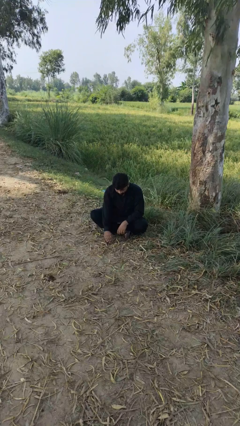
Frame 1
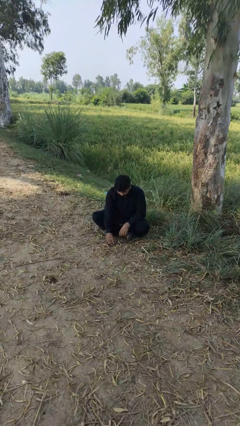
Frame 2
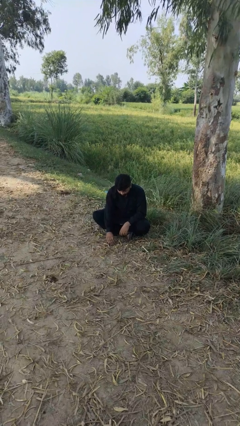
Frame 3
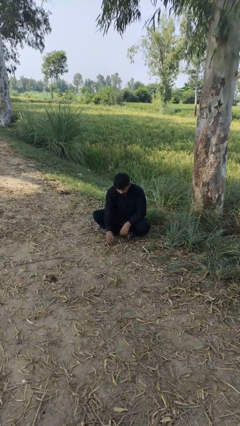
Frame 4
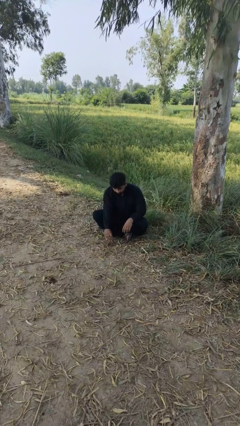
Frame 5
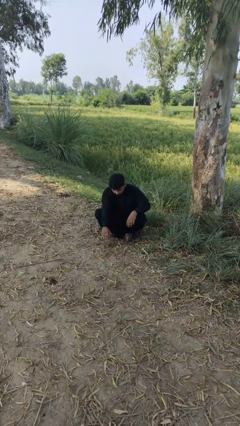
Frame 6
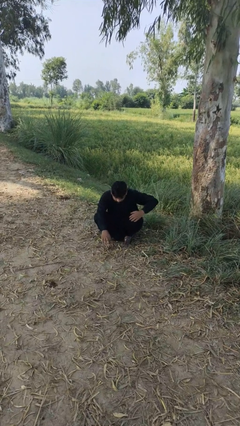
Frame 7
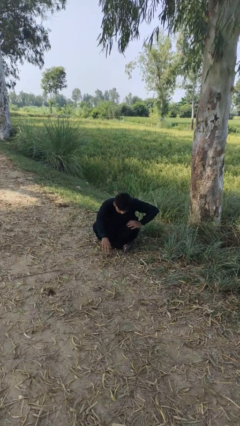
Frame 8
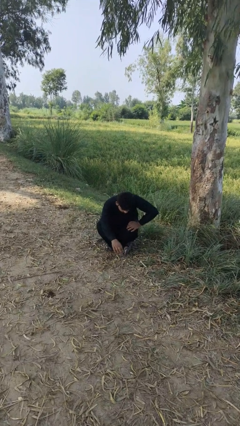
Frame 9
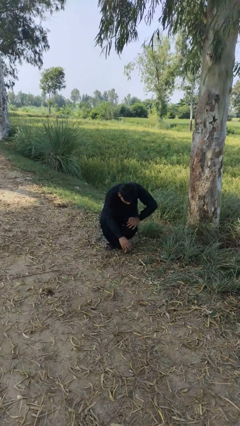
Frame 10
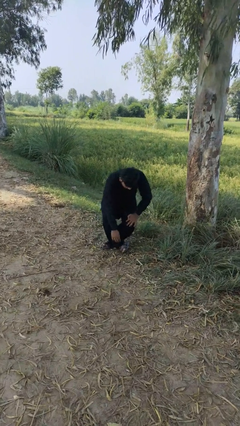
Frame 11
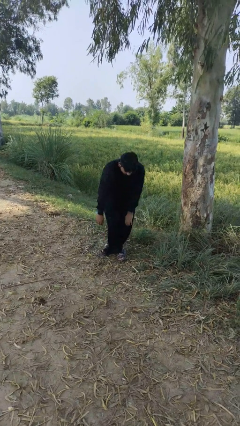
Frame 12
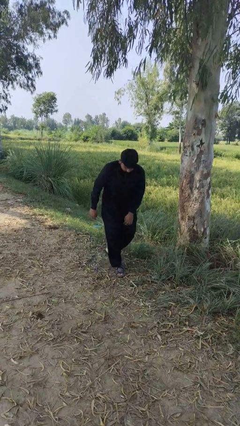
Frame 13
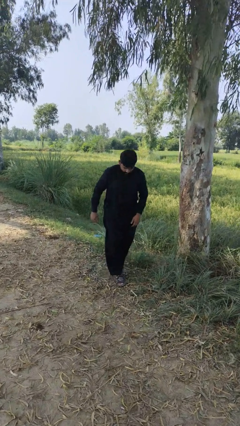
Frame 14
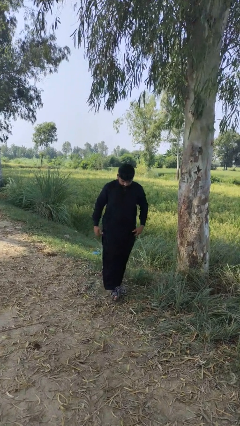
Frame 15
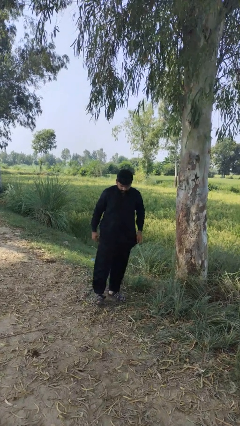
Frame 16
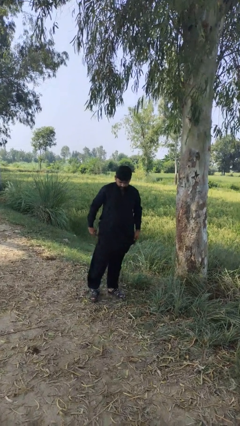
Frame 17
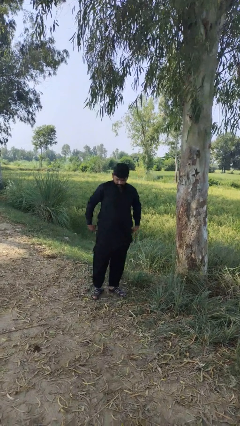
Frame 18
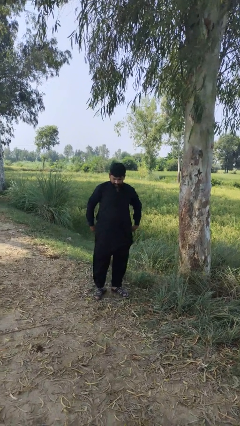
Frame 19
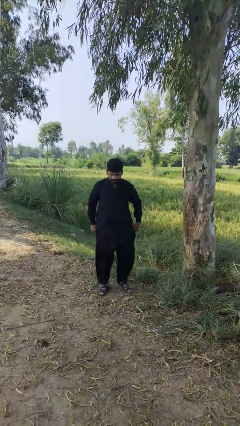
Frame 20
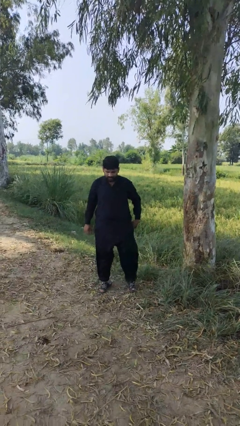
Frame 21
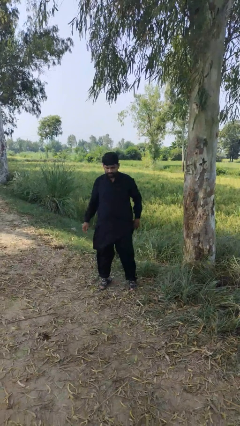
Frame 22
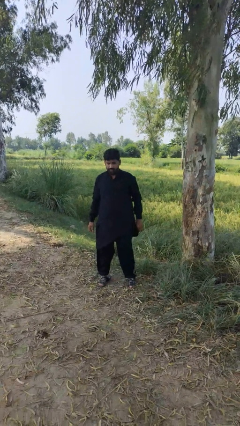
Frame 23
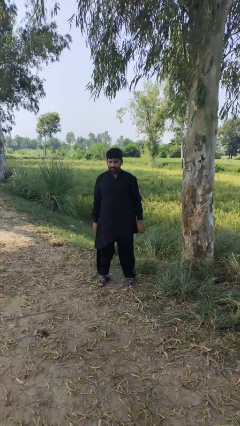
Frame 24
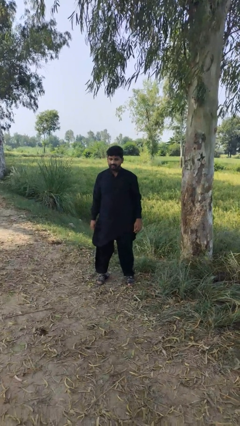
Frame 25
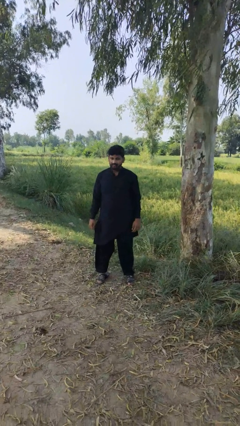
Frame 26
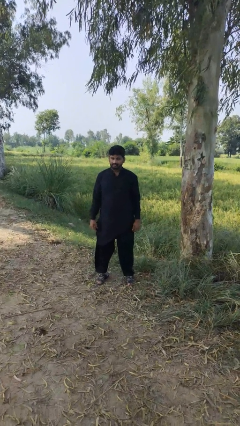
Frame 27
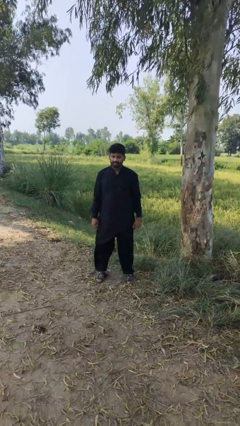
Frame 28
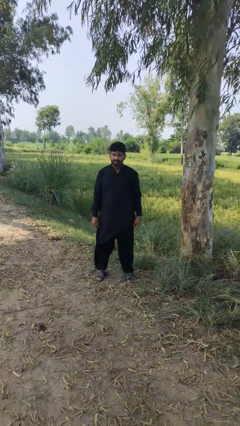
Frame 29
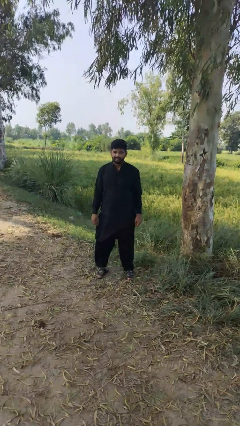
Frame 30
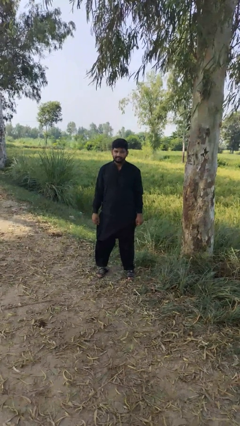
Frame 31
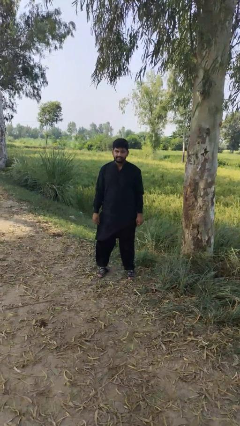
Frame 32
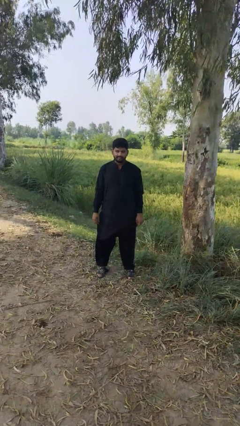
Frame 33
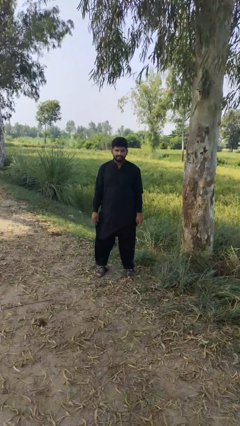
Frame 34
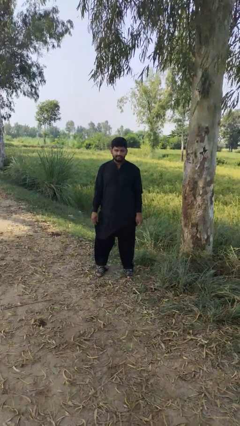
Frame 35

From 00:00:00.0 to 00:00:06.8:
person stands up from floor

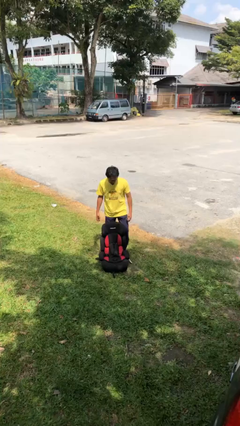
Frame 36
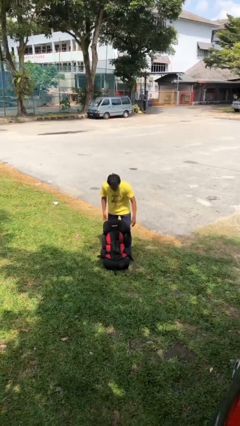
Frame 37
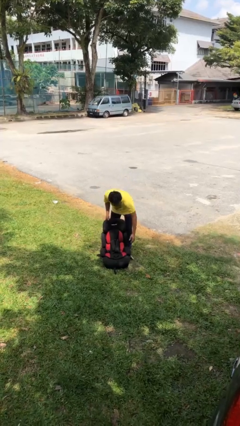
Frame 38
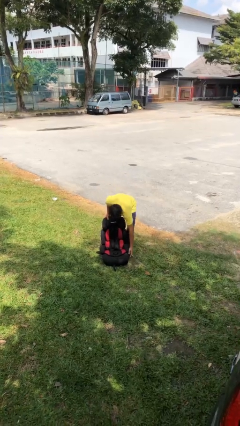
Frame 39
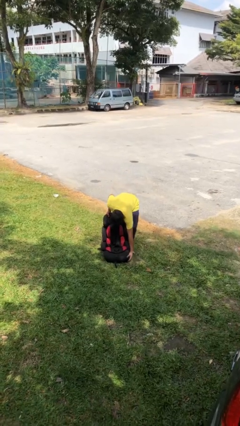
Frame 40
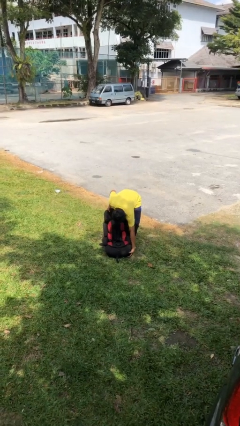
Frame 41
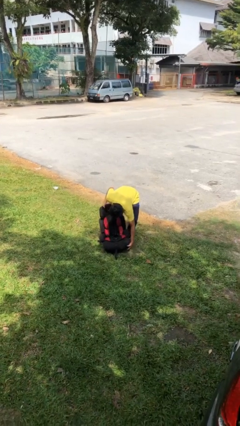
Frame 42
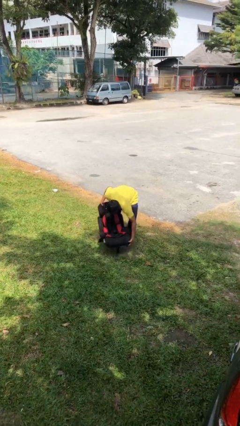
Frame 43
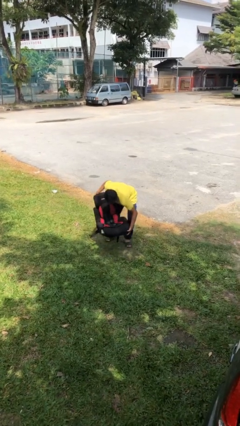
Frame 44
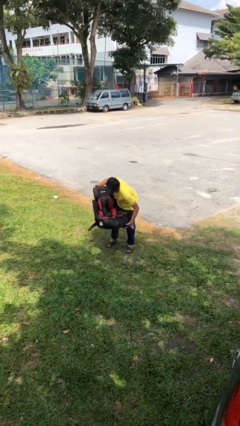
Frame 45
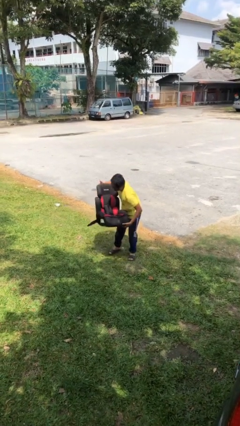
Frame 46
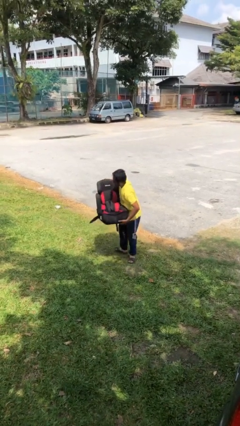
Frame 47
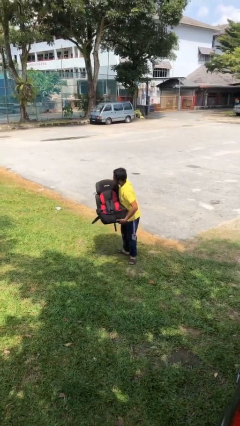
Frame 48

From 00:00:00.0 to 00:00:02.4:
person picks up object from floor

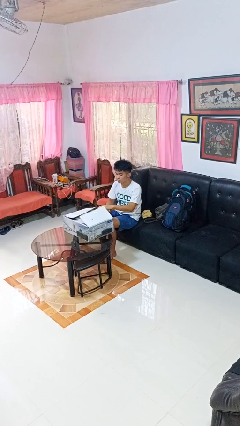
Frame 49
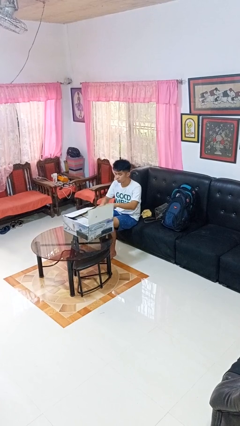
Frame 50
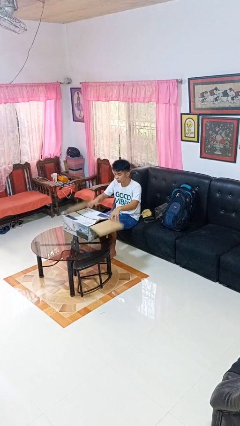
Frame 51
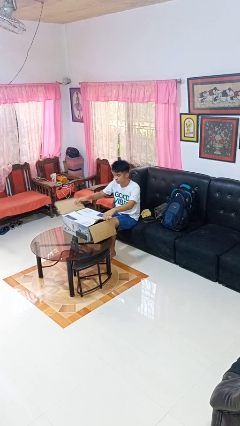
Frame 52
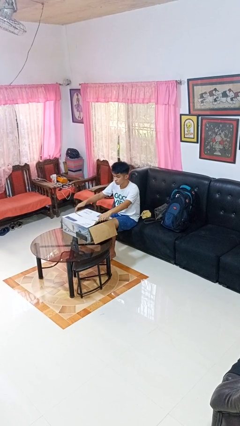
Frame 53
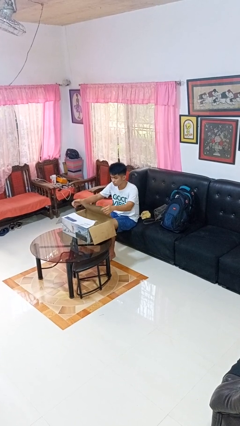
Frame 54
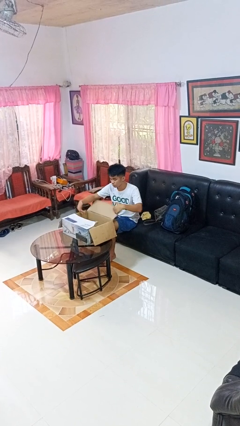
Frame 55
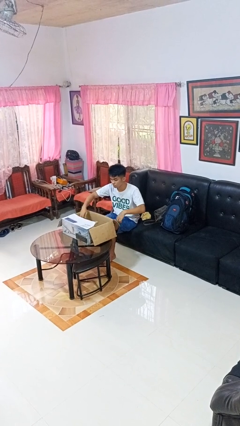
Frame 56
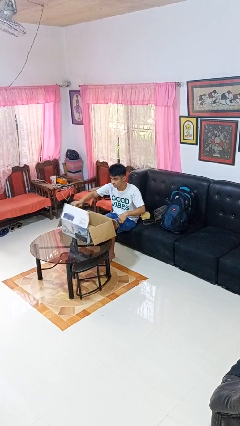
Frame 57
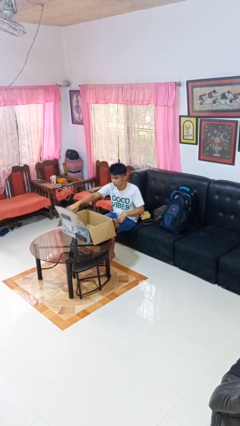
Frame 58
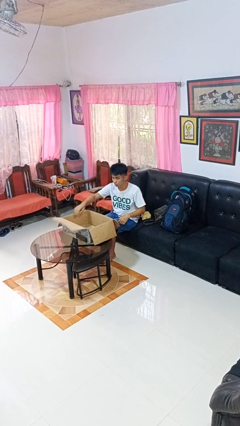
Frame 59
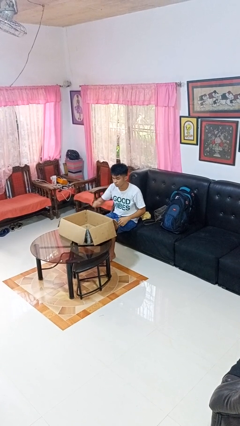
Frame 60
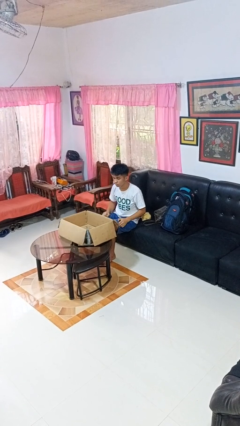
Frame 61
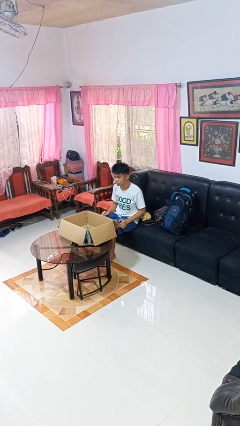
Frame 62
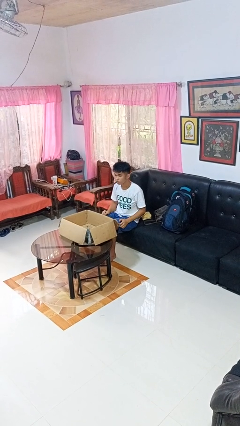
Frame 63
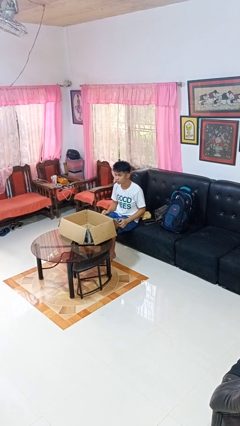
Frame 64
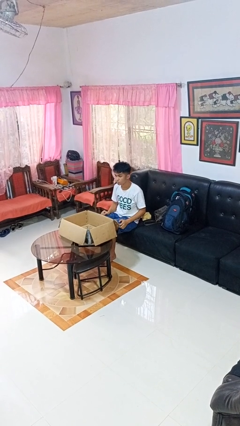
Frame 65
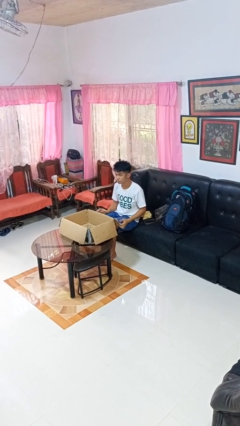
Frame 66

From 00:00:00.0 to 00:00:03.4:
person opens box

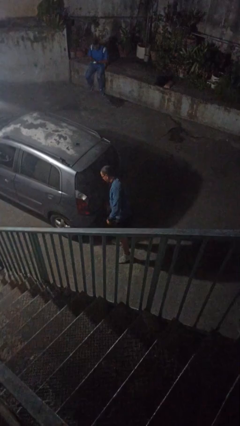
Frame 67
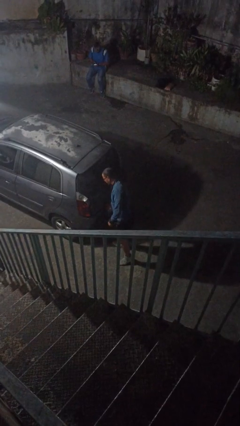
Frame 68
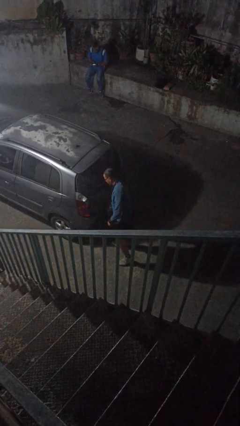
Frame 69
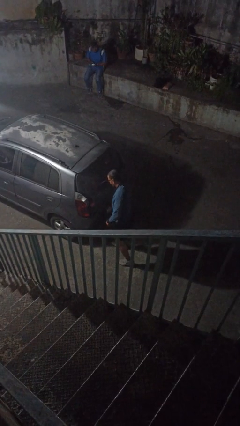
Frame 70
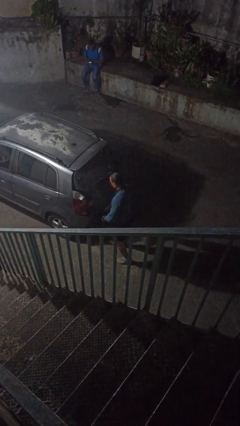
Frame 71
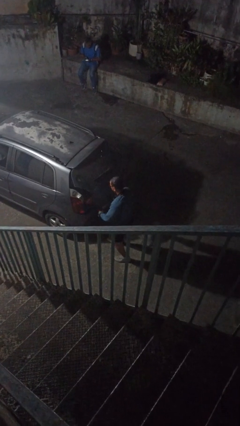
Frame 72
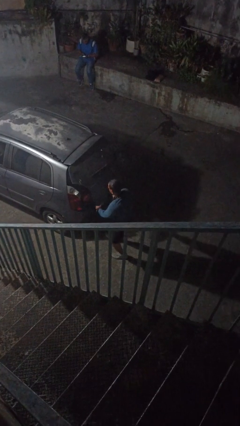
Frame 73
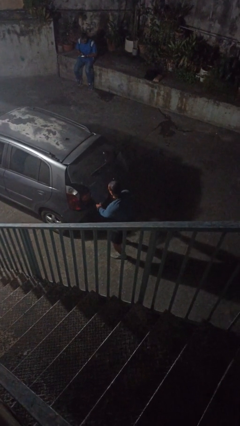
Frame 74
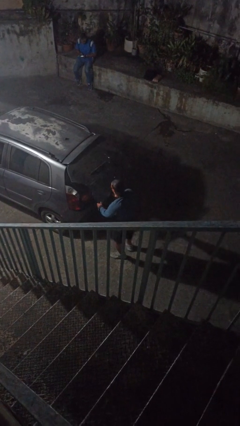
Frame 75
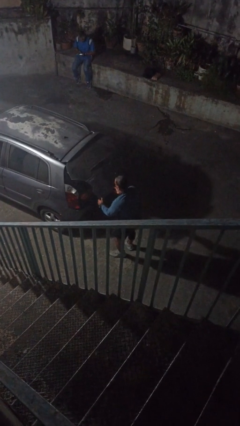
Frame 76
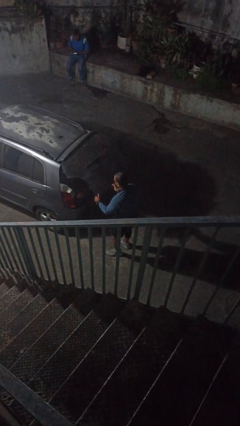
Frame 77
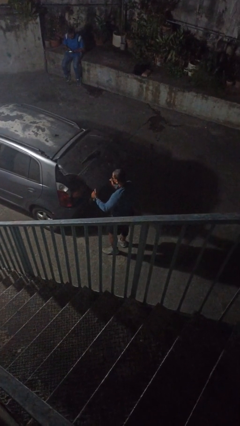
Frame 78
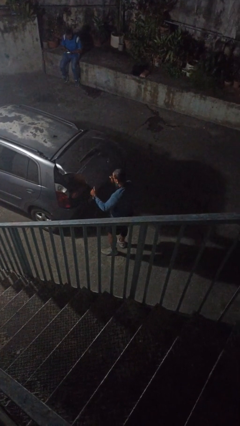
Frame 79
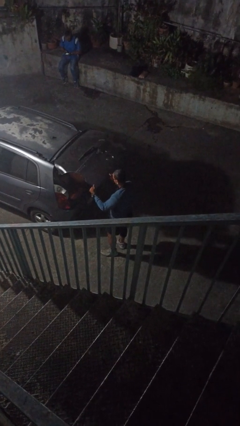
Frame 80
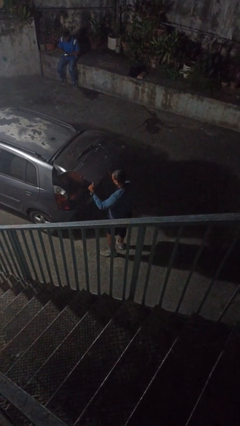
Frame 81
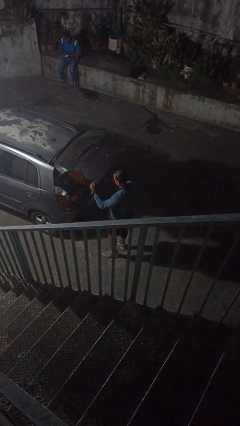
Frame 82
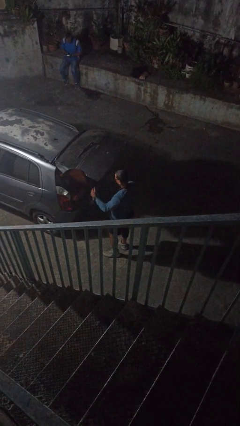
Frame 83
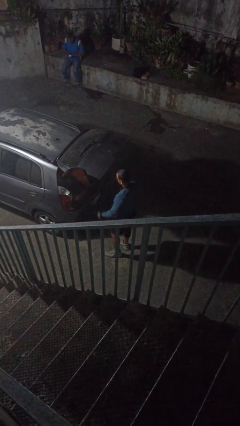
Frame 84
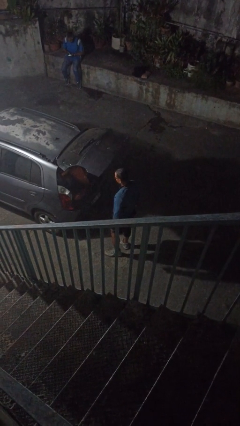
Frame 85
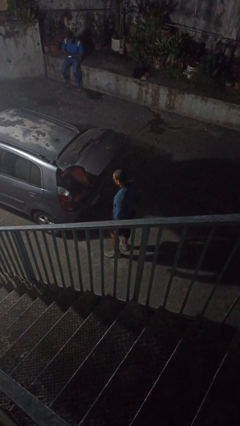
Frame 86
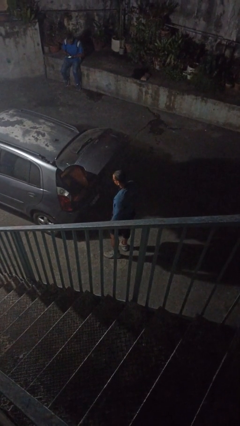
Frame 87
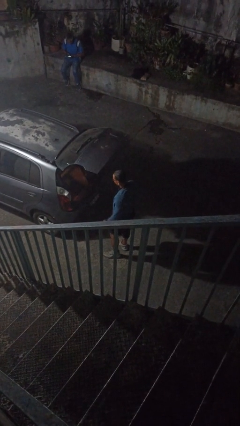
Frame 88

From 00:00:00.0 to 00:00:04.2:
person opens car trunk

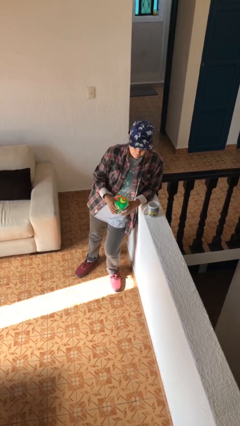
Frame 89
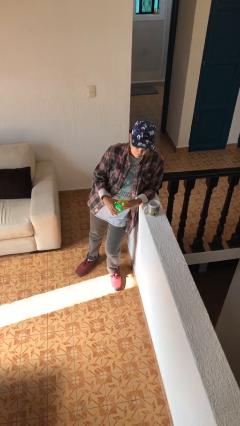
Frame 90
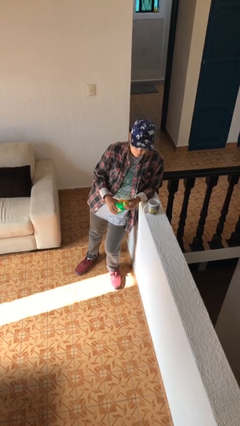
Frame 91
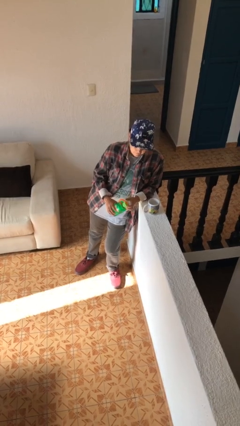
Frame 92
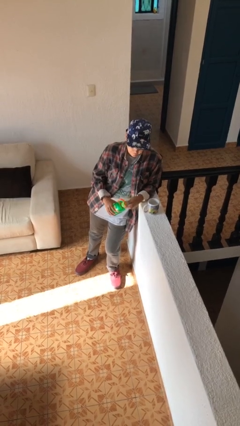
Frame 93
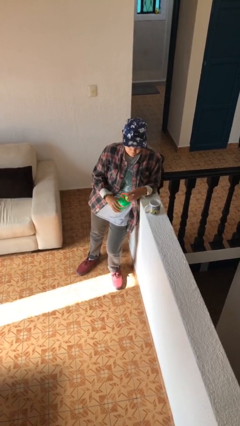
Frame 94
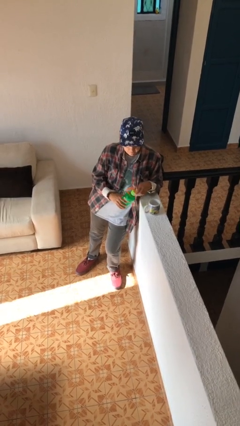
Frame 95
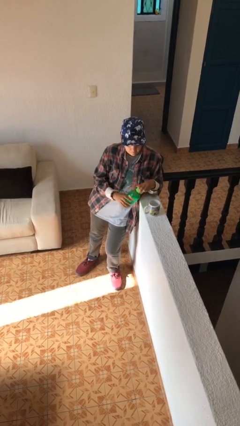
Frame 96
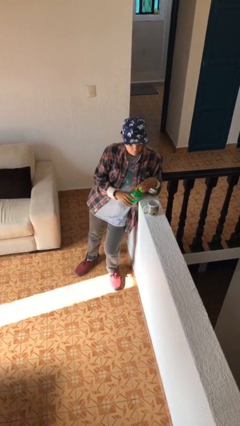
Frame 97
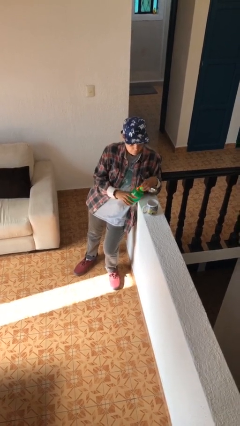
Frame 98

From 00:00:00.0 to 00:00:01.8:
person unscrews lid from bottle
